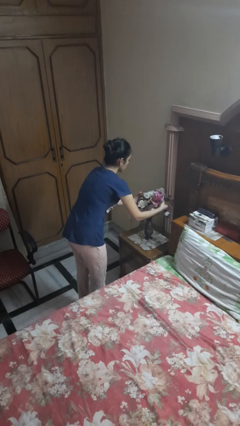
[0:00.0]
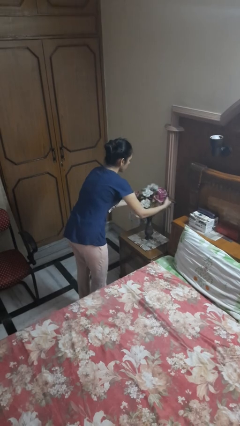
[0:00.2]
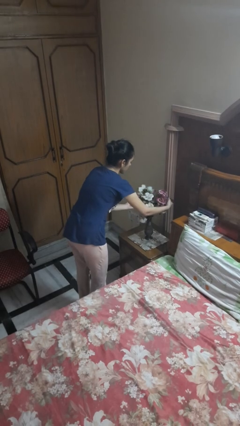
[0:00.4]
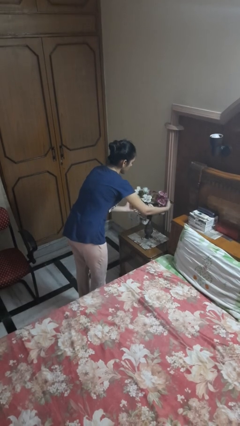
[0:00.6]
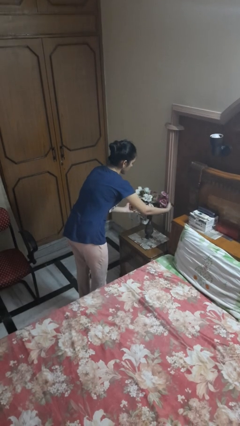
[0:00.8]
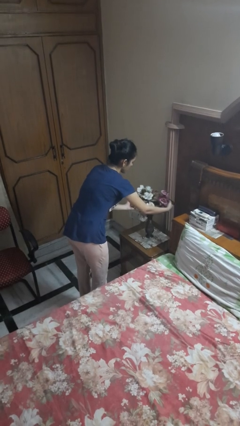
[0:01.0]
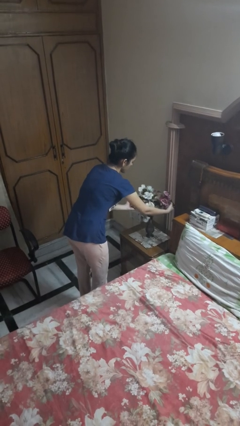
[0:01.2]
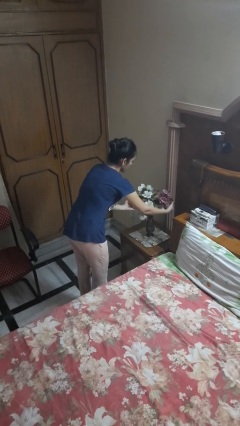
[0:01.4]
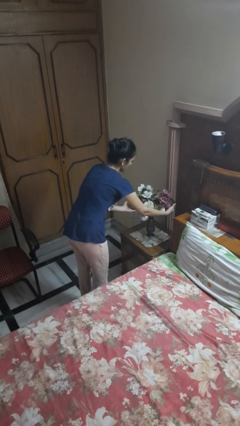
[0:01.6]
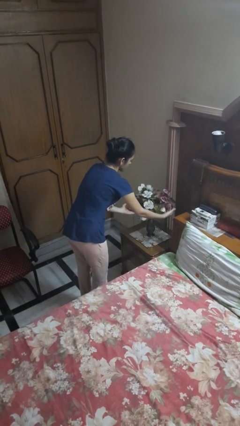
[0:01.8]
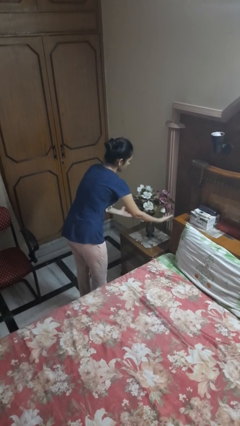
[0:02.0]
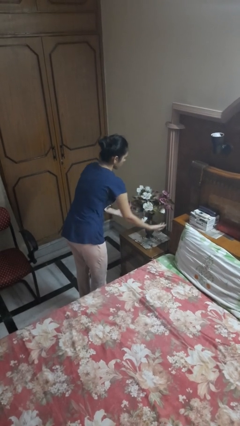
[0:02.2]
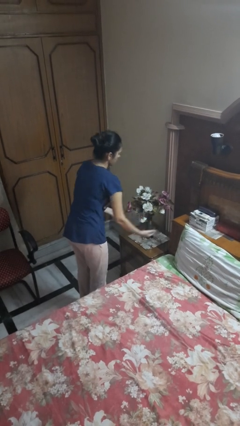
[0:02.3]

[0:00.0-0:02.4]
person arranges flowers in vase

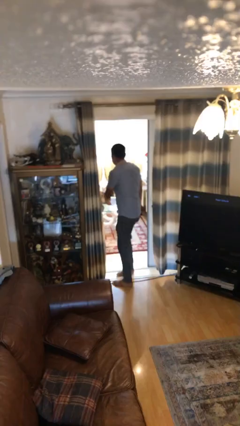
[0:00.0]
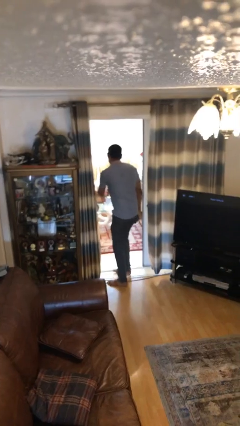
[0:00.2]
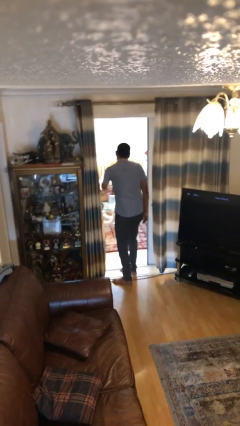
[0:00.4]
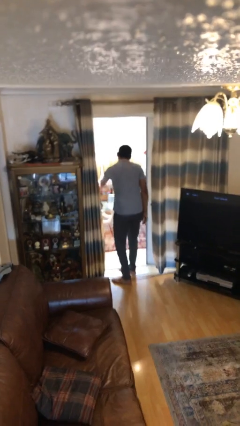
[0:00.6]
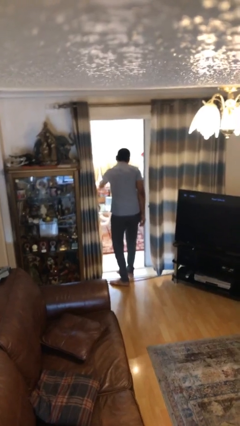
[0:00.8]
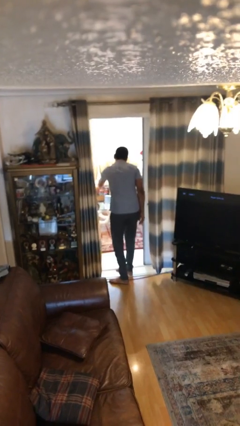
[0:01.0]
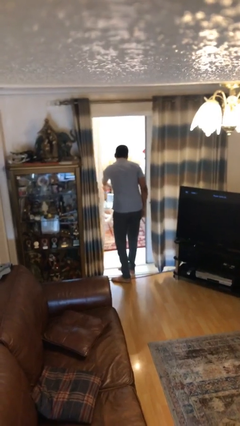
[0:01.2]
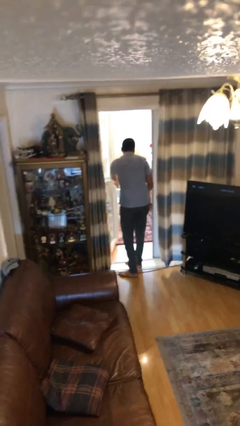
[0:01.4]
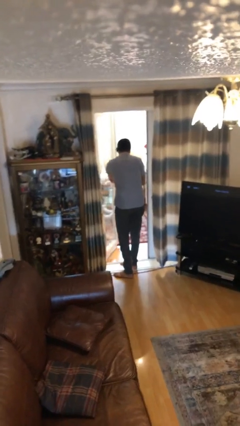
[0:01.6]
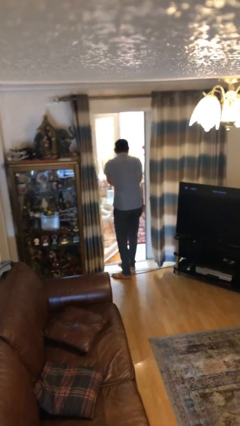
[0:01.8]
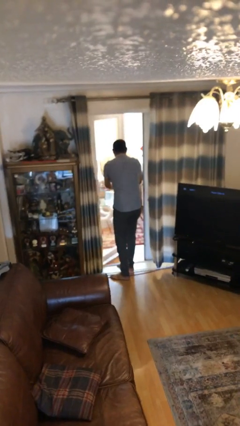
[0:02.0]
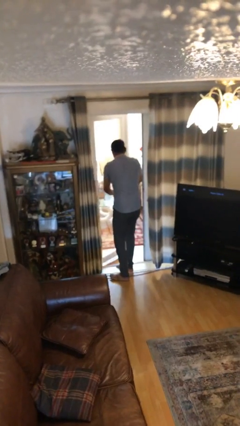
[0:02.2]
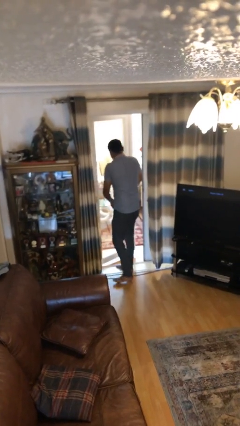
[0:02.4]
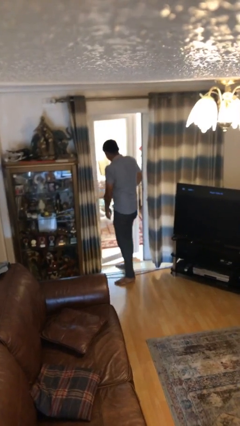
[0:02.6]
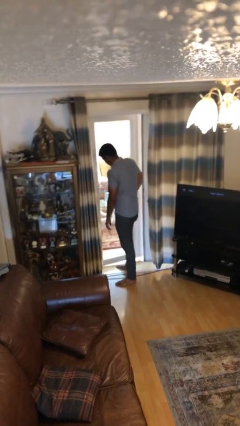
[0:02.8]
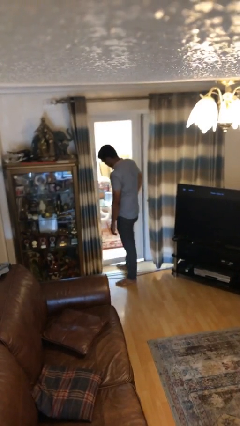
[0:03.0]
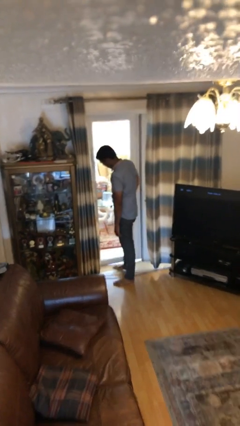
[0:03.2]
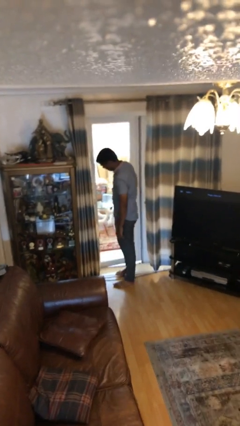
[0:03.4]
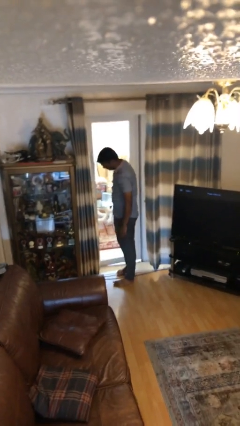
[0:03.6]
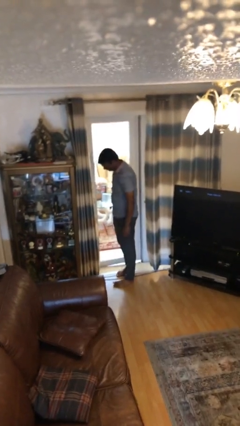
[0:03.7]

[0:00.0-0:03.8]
person closes facility door

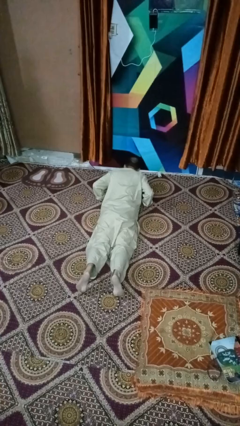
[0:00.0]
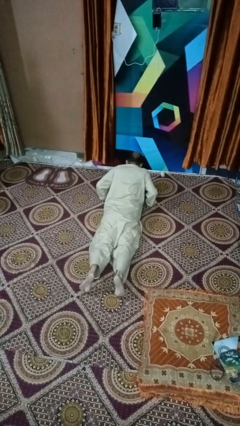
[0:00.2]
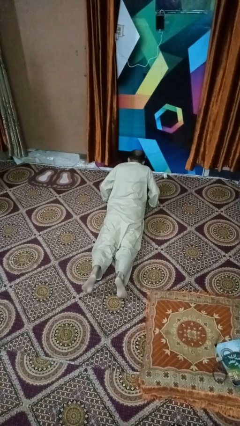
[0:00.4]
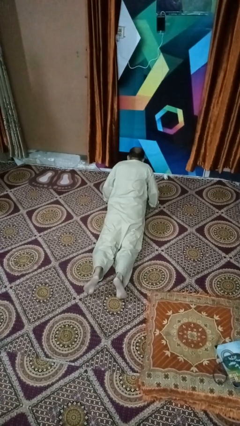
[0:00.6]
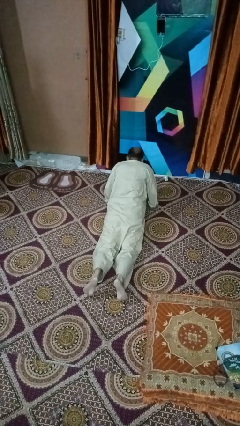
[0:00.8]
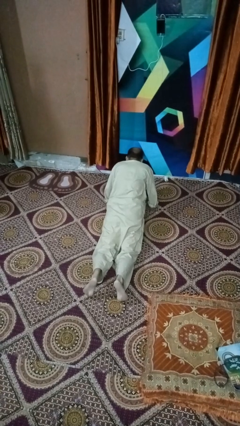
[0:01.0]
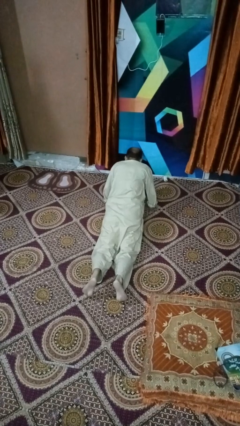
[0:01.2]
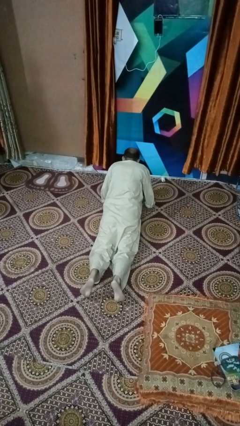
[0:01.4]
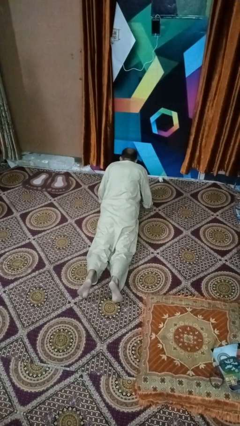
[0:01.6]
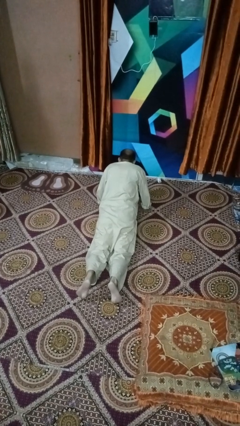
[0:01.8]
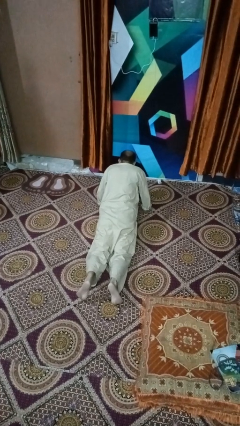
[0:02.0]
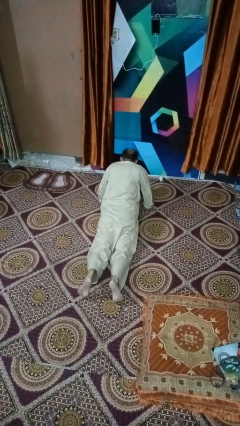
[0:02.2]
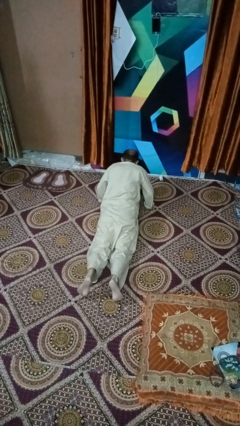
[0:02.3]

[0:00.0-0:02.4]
person exercises with situp

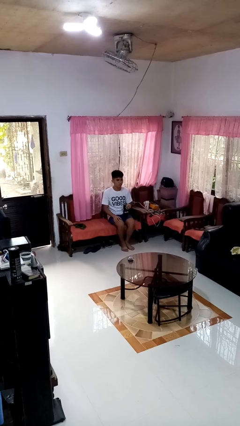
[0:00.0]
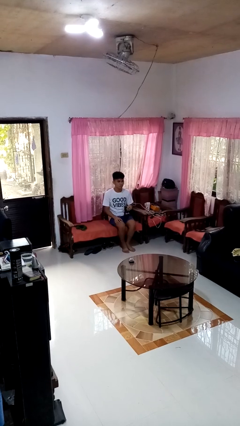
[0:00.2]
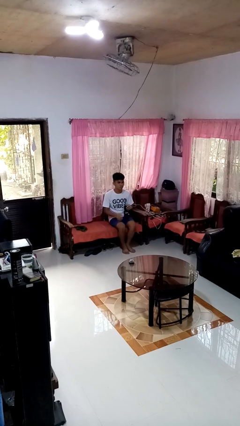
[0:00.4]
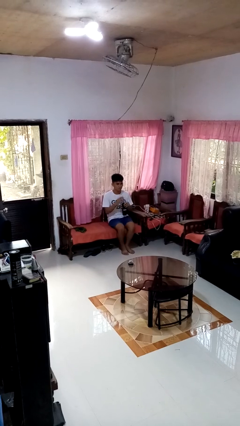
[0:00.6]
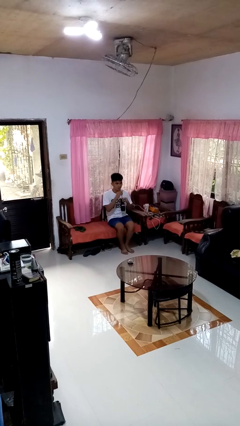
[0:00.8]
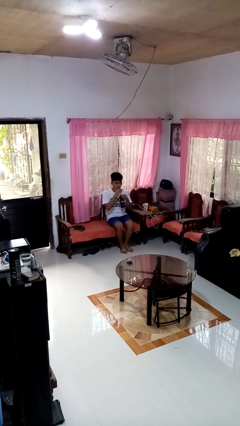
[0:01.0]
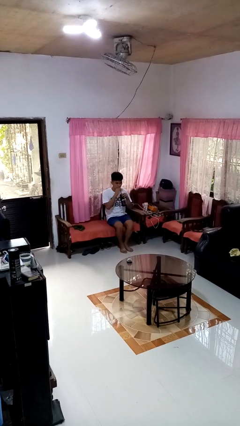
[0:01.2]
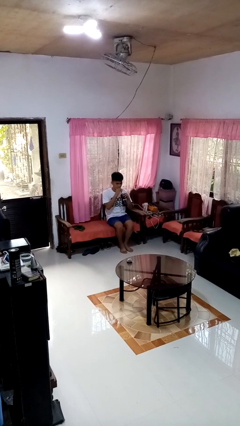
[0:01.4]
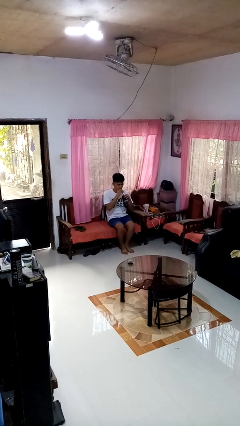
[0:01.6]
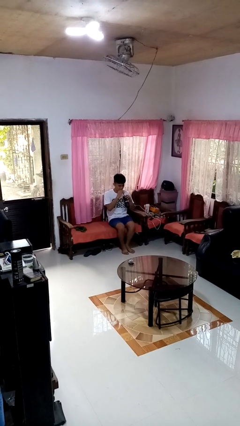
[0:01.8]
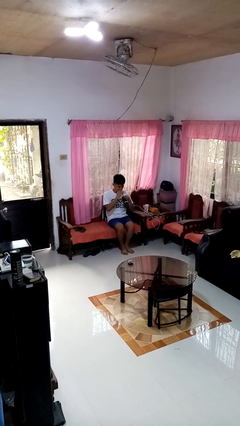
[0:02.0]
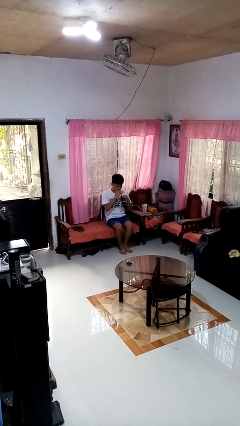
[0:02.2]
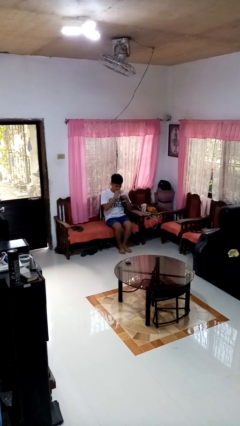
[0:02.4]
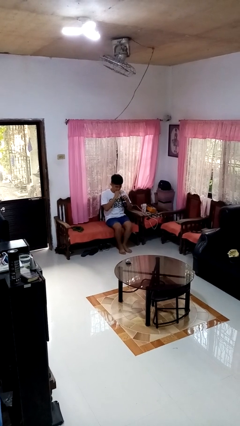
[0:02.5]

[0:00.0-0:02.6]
person drinks from straw

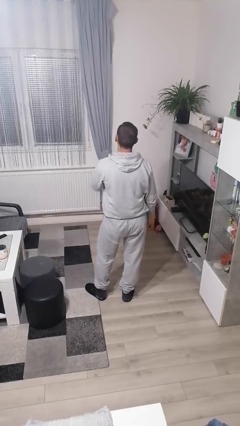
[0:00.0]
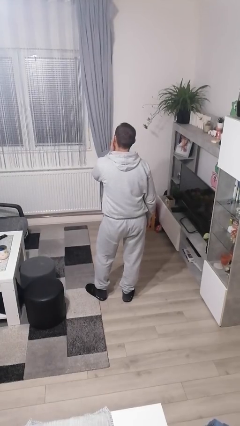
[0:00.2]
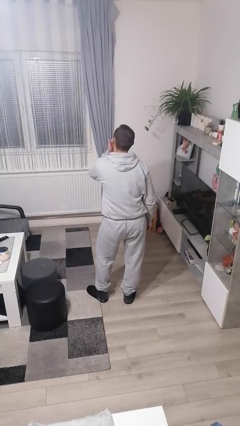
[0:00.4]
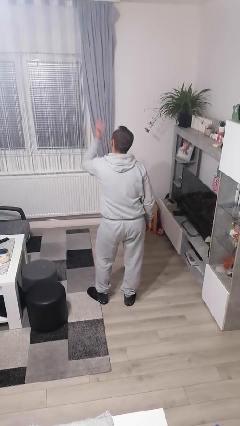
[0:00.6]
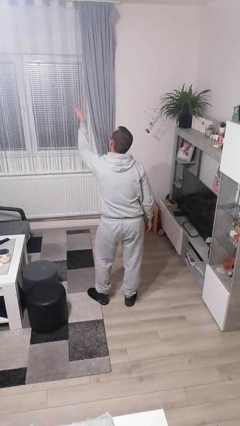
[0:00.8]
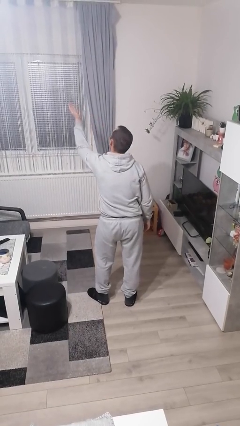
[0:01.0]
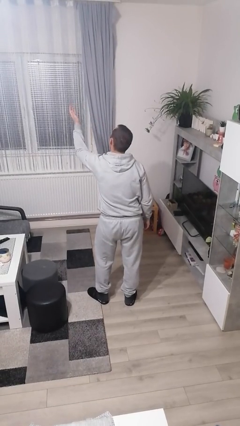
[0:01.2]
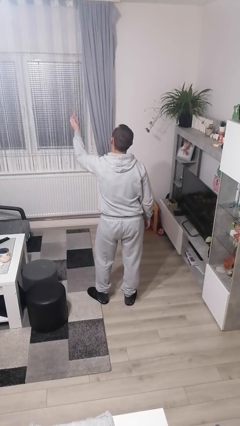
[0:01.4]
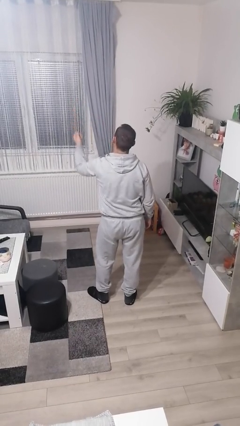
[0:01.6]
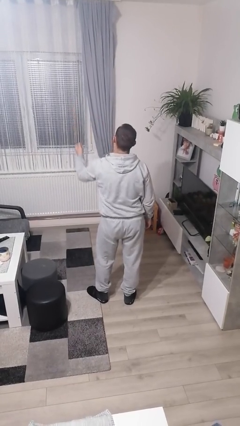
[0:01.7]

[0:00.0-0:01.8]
person gestures blow kiss

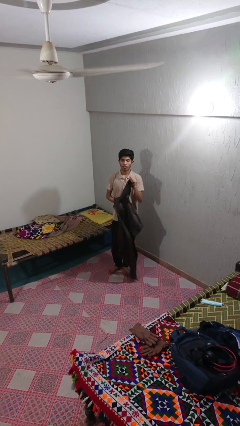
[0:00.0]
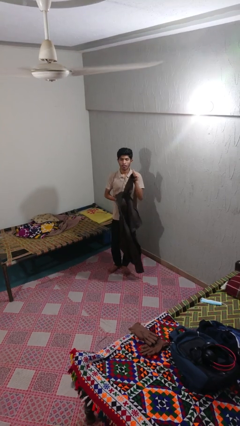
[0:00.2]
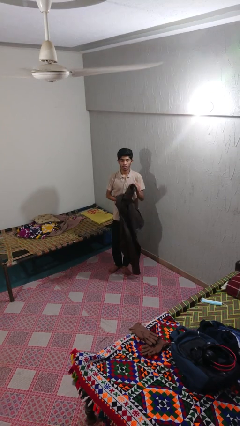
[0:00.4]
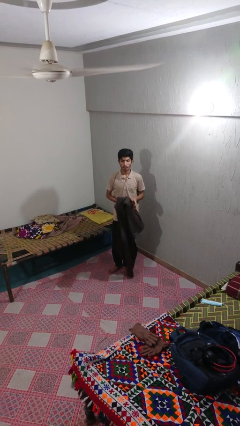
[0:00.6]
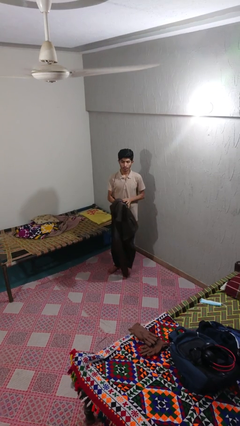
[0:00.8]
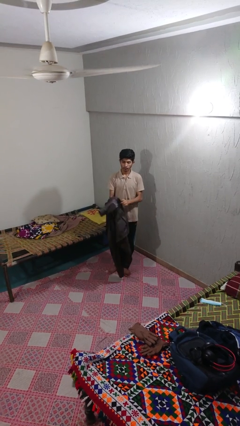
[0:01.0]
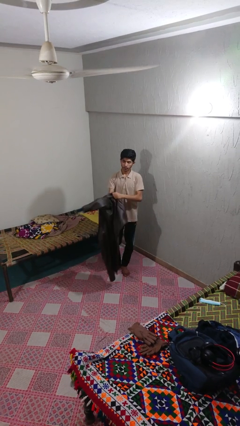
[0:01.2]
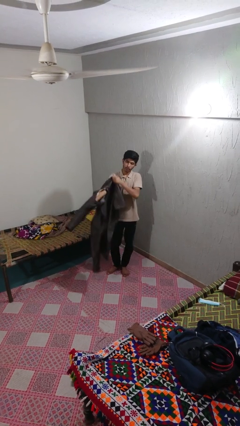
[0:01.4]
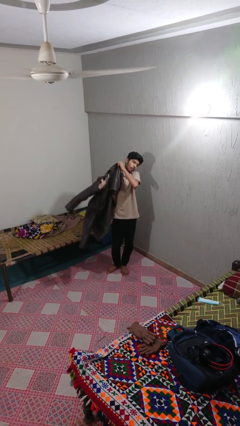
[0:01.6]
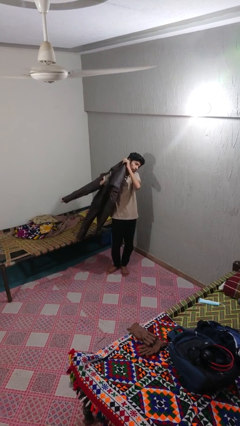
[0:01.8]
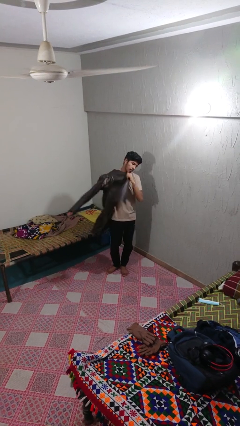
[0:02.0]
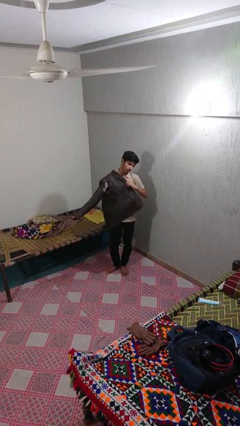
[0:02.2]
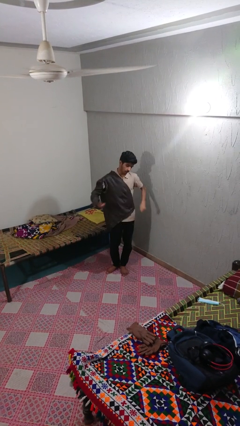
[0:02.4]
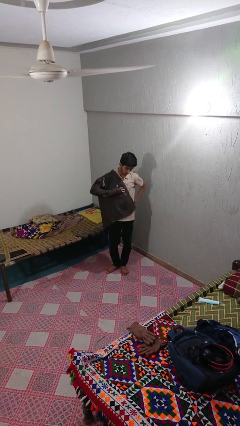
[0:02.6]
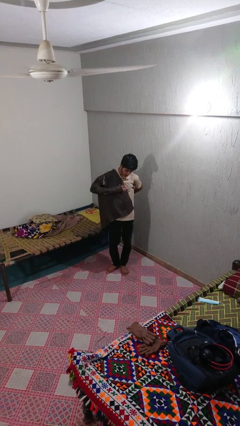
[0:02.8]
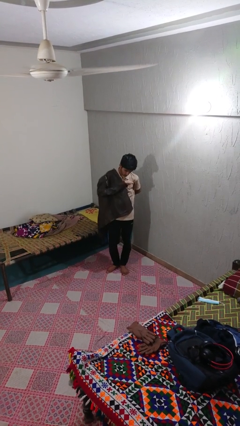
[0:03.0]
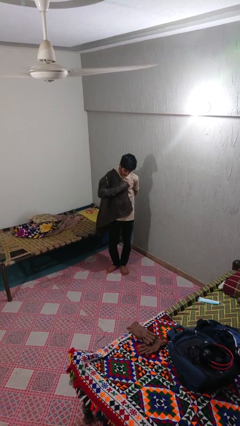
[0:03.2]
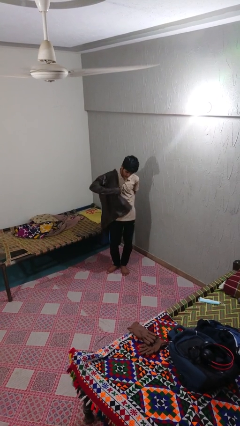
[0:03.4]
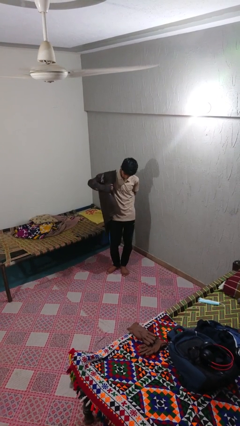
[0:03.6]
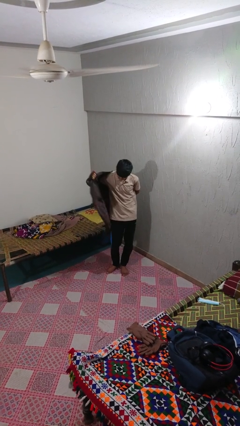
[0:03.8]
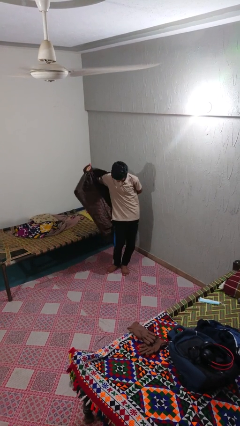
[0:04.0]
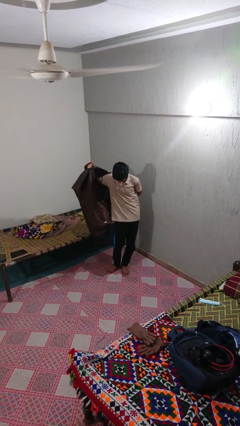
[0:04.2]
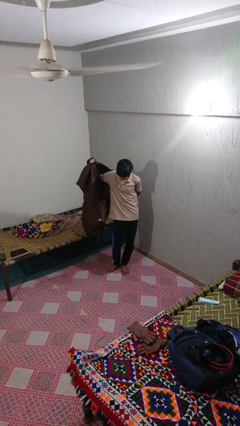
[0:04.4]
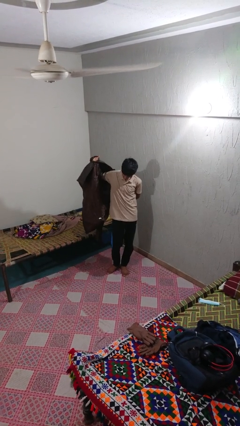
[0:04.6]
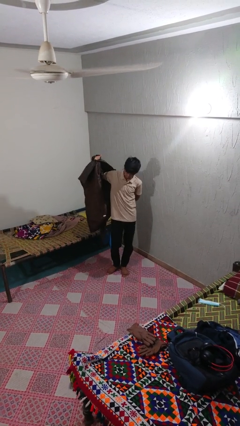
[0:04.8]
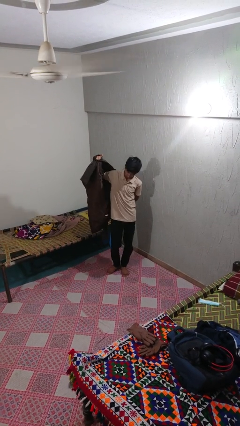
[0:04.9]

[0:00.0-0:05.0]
person puts on jacket
